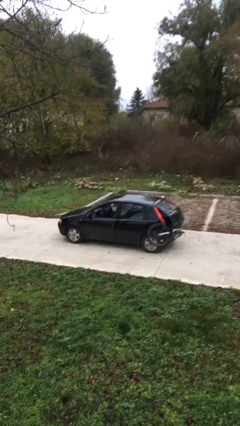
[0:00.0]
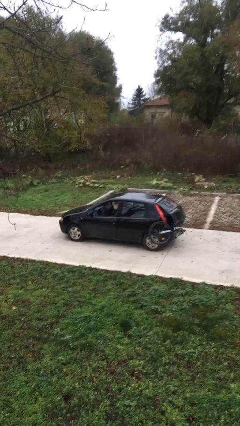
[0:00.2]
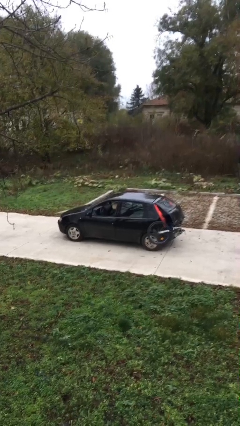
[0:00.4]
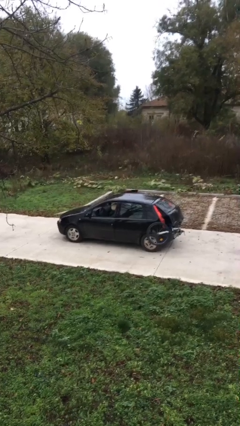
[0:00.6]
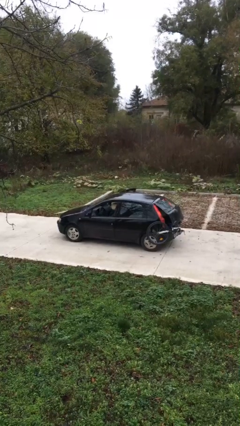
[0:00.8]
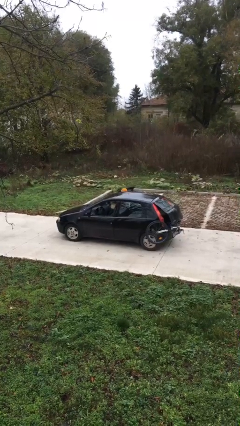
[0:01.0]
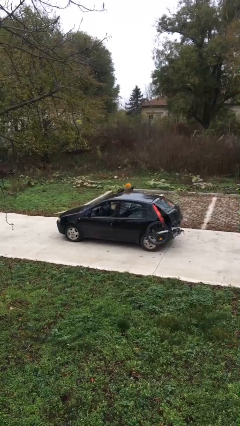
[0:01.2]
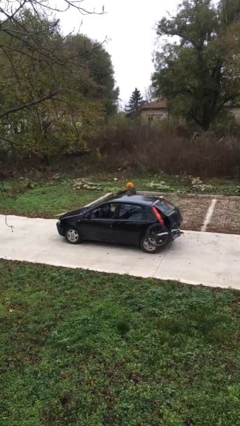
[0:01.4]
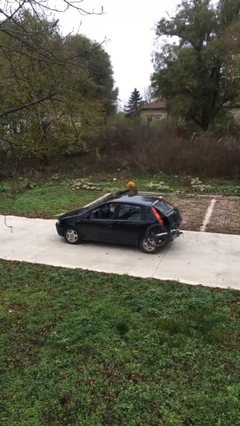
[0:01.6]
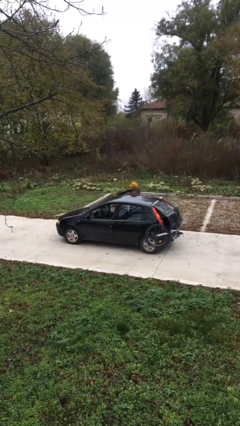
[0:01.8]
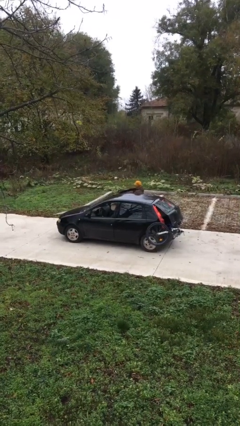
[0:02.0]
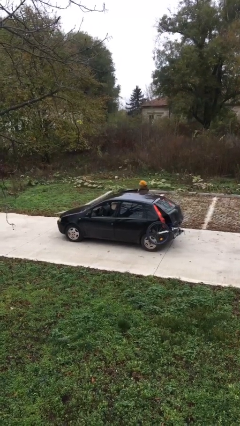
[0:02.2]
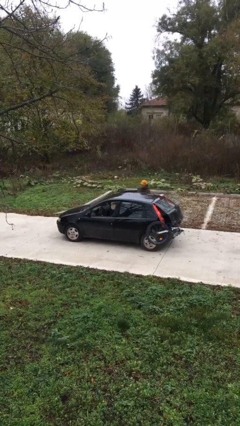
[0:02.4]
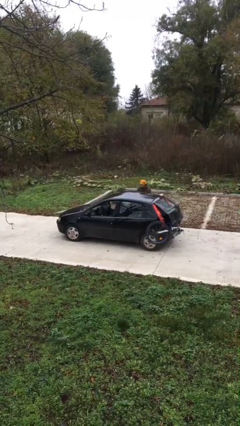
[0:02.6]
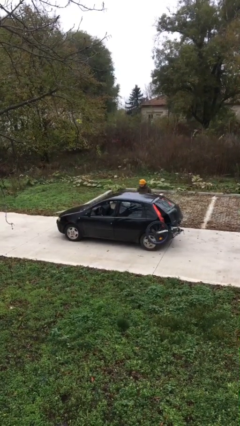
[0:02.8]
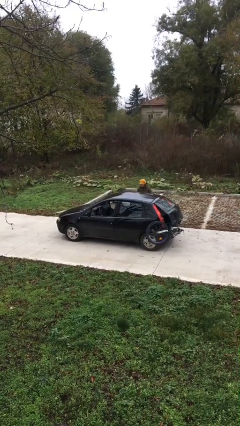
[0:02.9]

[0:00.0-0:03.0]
car drops off person

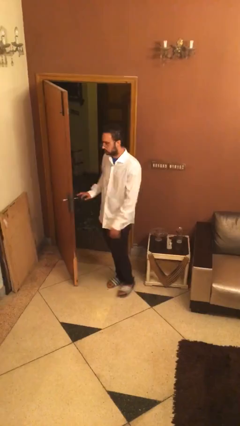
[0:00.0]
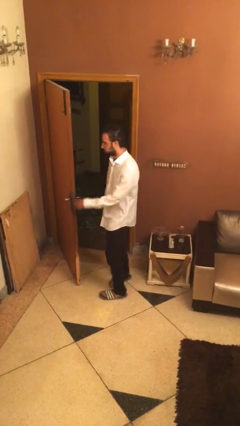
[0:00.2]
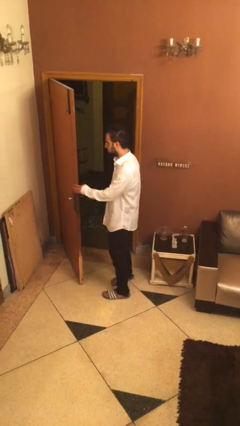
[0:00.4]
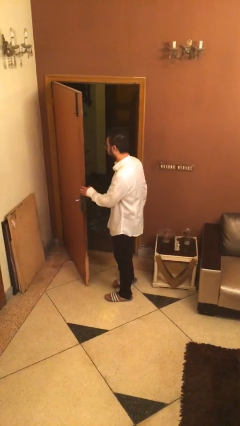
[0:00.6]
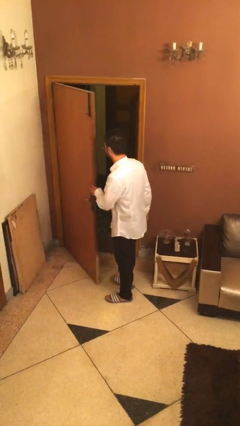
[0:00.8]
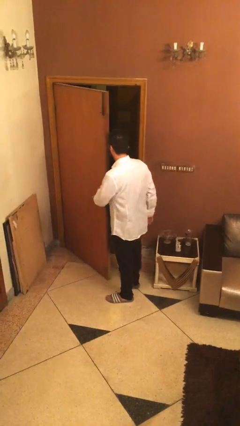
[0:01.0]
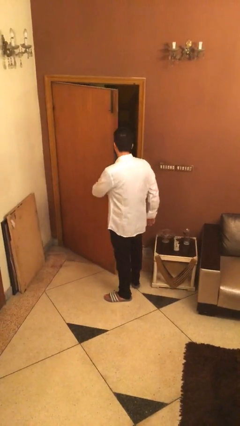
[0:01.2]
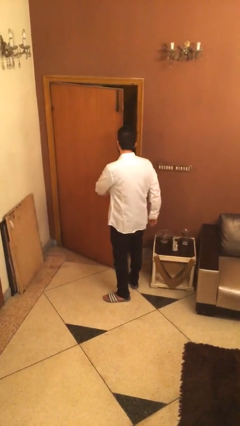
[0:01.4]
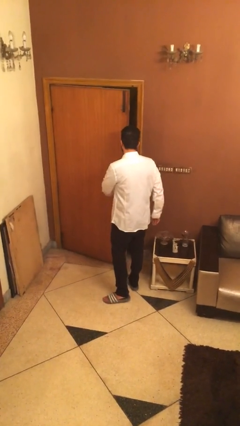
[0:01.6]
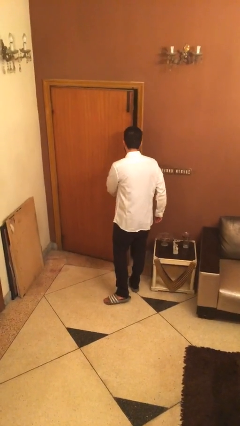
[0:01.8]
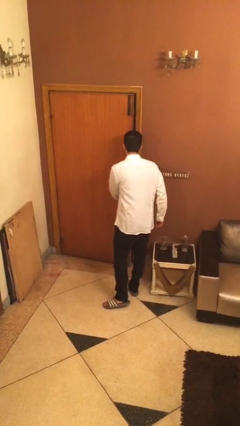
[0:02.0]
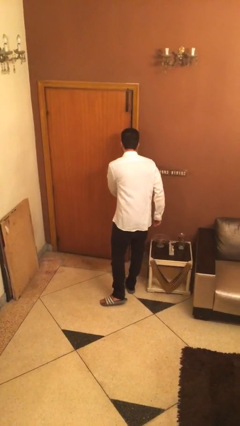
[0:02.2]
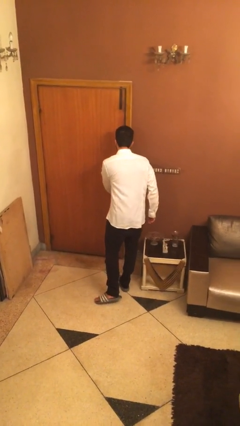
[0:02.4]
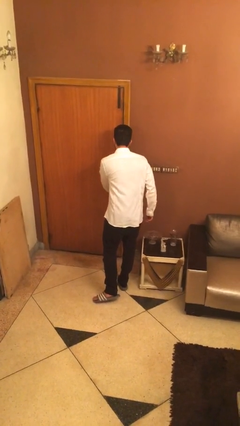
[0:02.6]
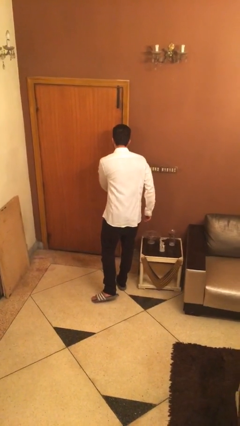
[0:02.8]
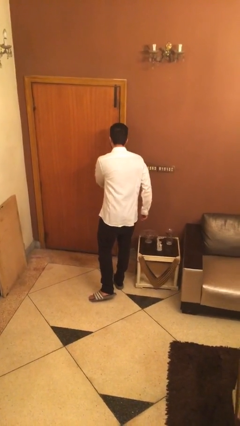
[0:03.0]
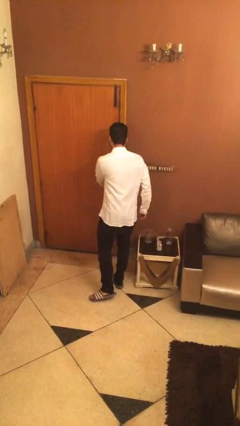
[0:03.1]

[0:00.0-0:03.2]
person closes facility door

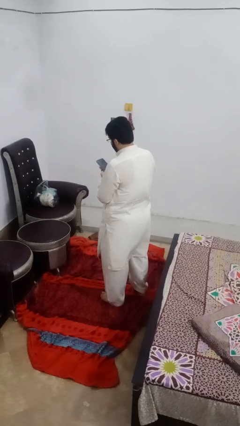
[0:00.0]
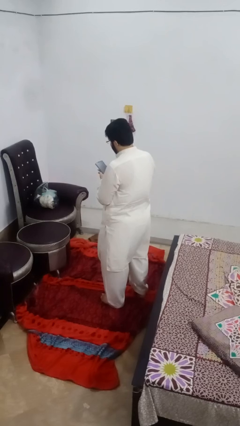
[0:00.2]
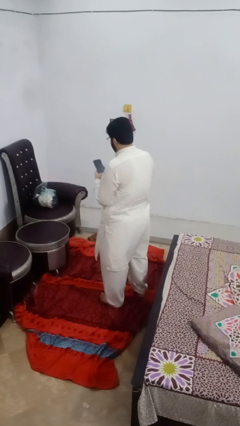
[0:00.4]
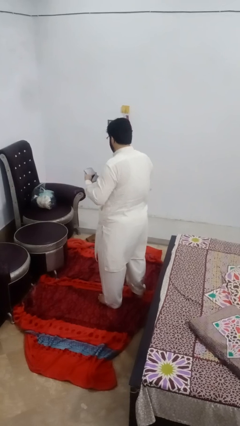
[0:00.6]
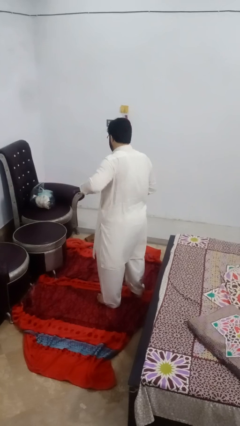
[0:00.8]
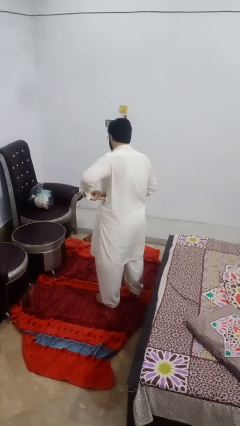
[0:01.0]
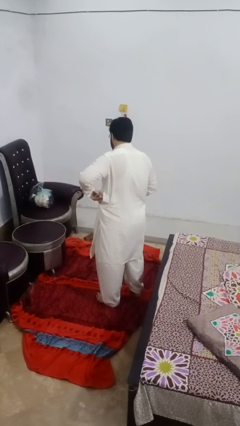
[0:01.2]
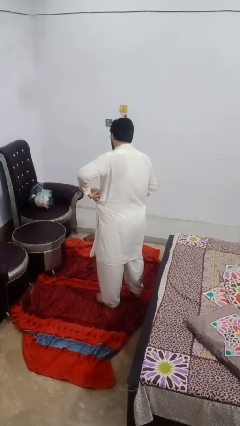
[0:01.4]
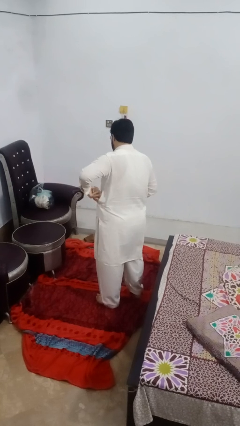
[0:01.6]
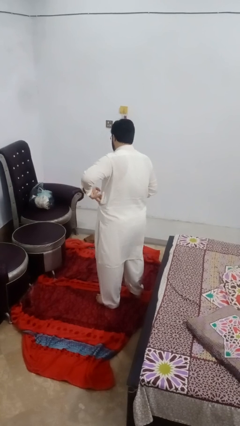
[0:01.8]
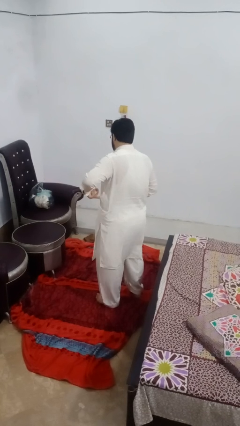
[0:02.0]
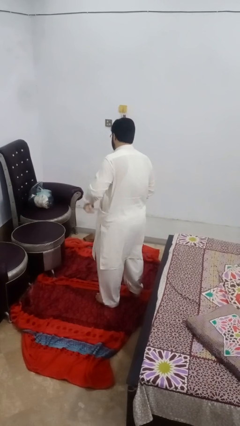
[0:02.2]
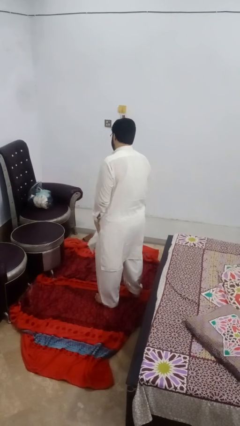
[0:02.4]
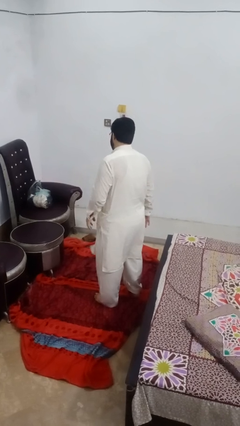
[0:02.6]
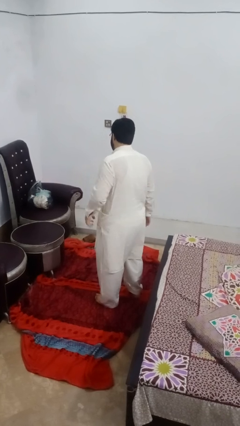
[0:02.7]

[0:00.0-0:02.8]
person puts phone into pocket

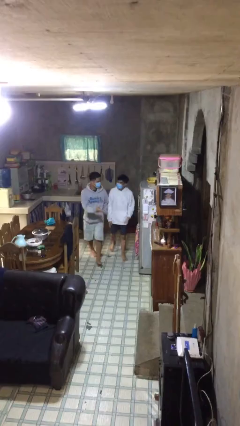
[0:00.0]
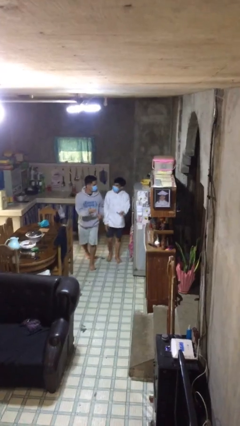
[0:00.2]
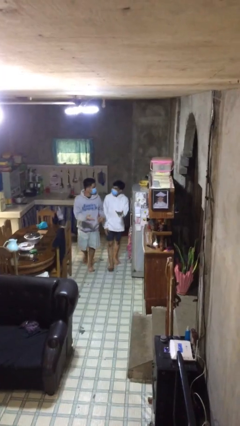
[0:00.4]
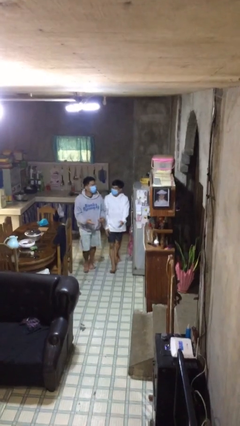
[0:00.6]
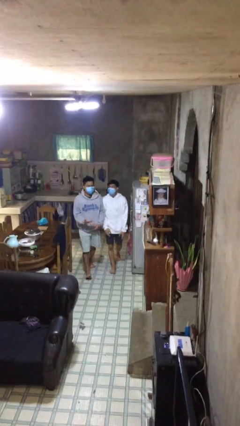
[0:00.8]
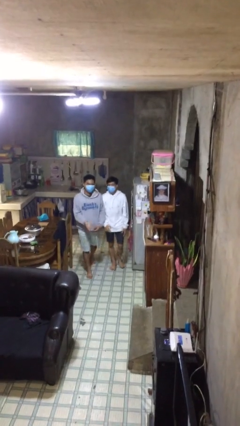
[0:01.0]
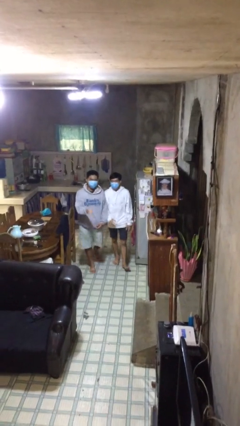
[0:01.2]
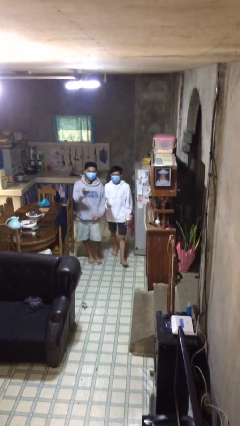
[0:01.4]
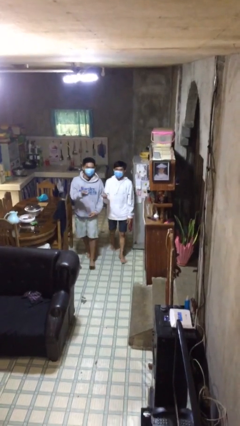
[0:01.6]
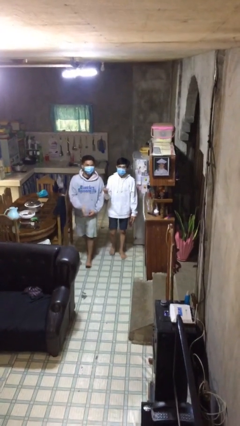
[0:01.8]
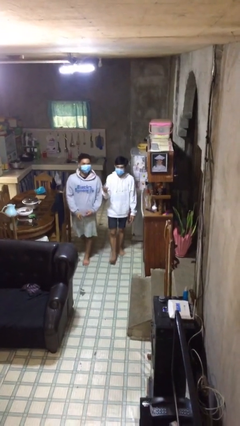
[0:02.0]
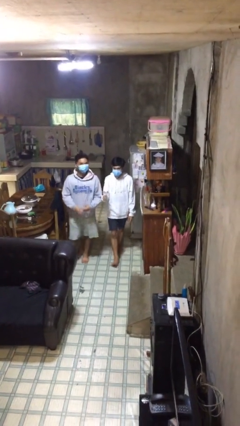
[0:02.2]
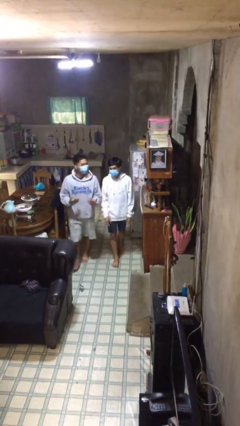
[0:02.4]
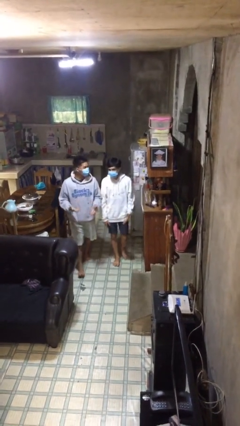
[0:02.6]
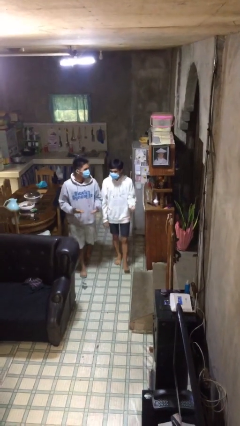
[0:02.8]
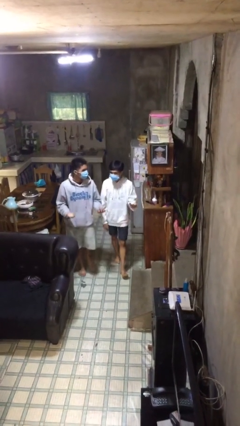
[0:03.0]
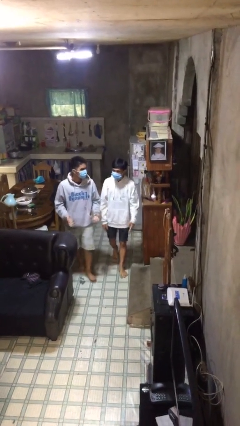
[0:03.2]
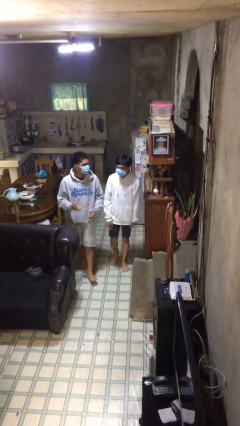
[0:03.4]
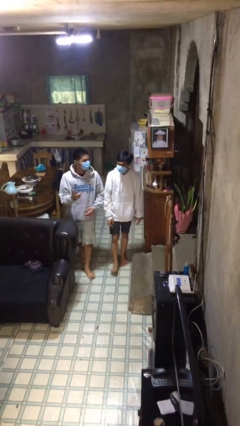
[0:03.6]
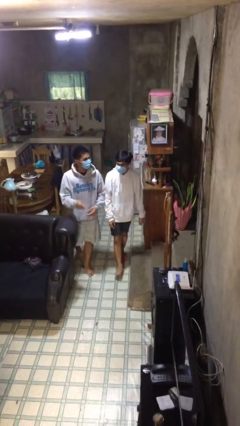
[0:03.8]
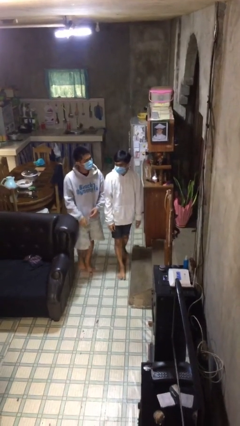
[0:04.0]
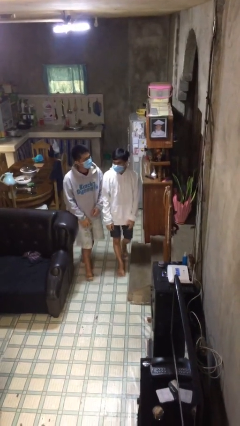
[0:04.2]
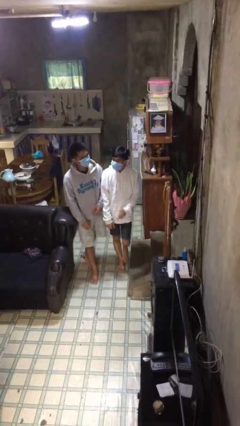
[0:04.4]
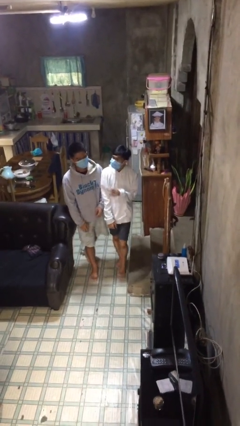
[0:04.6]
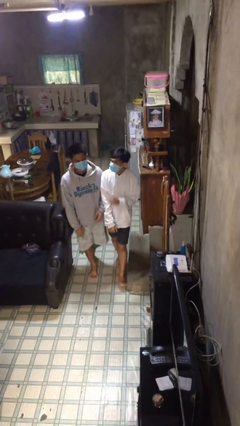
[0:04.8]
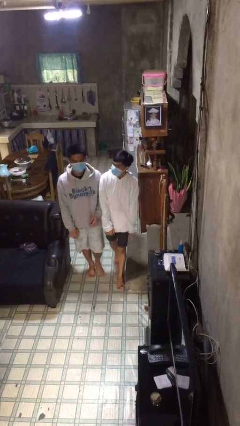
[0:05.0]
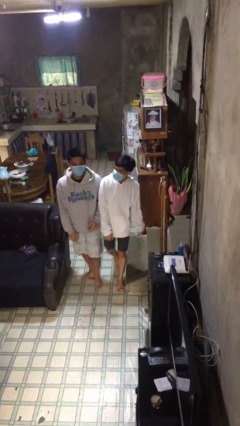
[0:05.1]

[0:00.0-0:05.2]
person talks to person

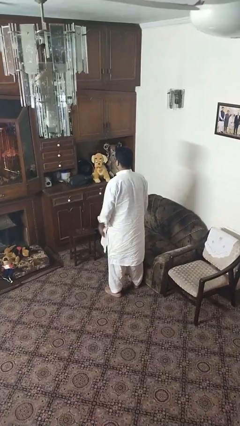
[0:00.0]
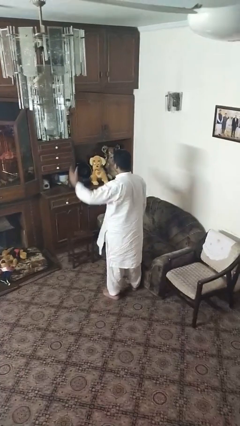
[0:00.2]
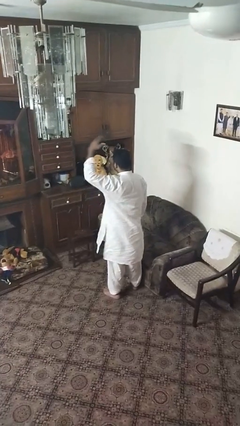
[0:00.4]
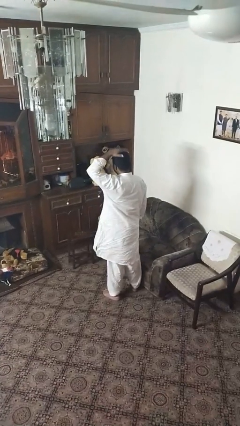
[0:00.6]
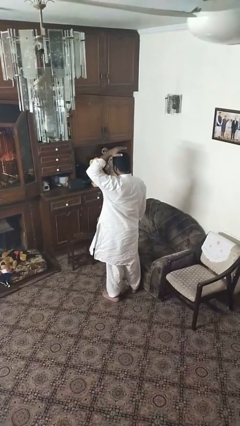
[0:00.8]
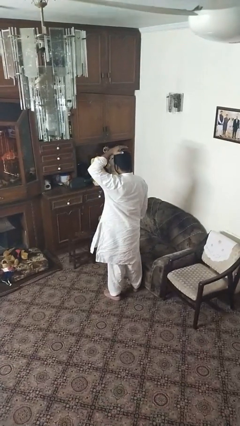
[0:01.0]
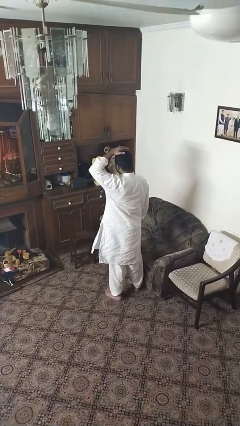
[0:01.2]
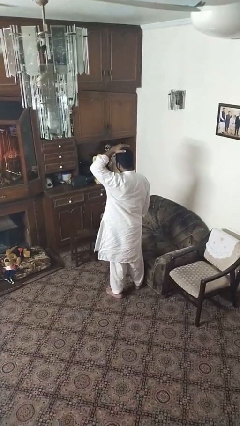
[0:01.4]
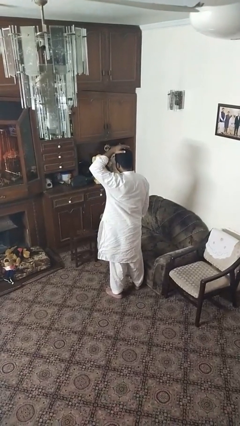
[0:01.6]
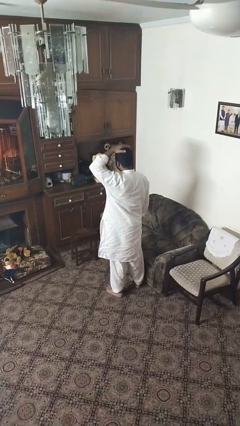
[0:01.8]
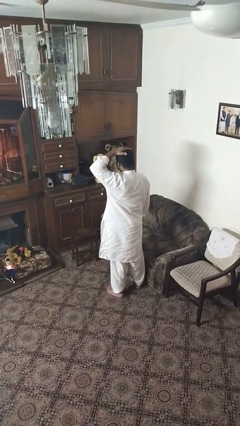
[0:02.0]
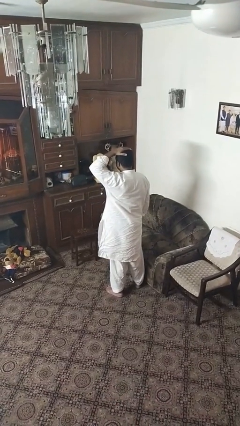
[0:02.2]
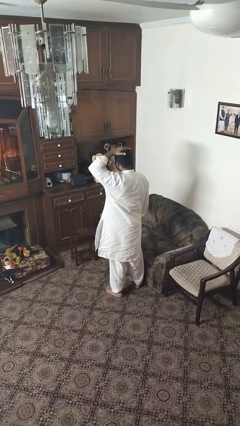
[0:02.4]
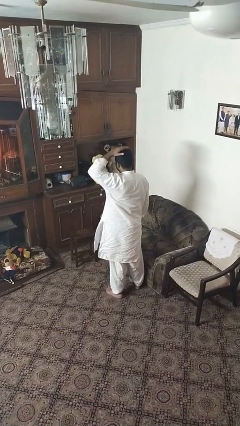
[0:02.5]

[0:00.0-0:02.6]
person pats head

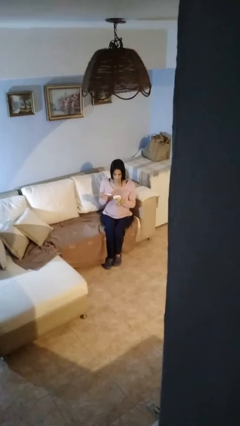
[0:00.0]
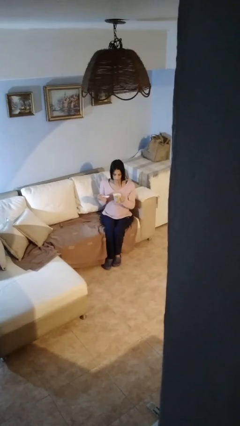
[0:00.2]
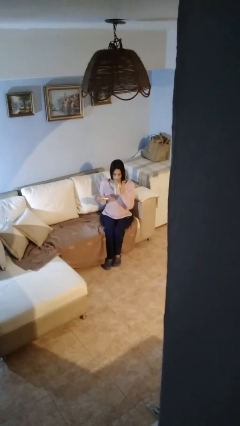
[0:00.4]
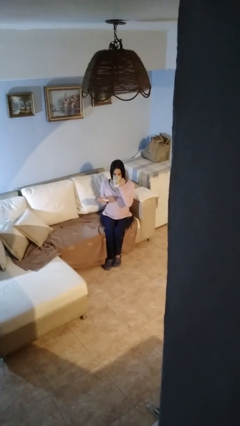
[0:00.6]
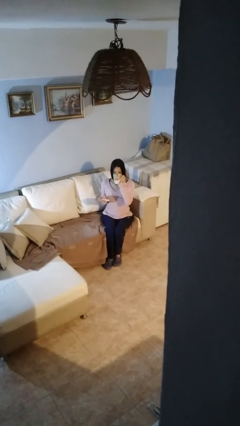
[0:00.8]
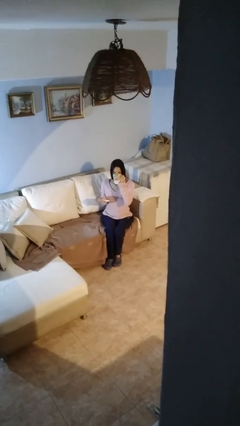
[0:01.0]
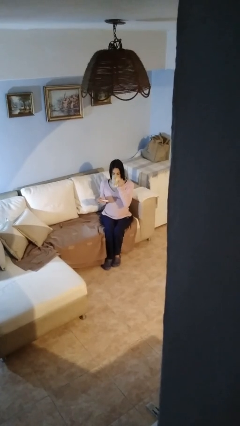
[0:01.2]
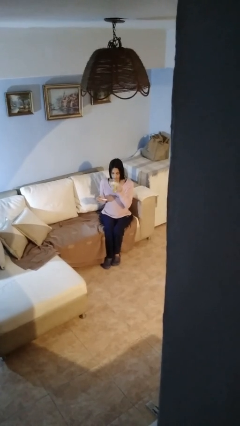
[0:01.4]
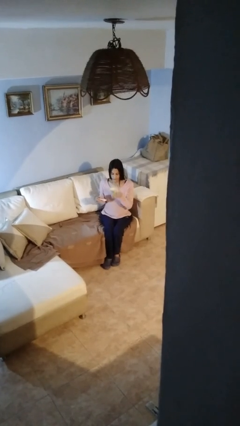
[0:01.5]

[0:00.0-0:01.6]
person drinks from mug
